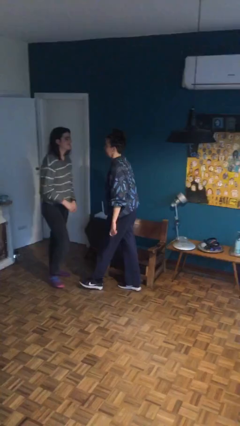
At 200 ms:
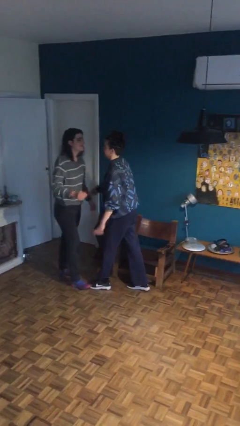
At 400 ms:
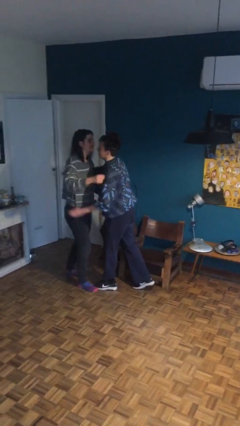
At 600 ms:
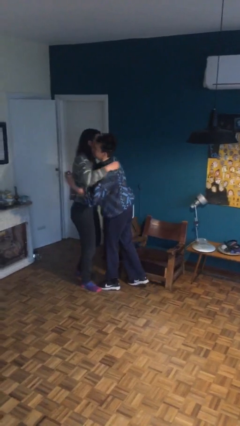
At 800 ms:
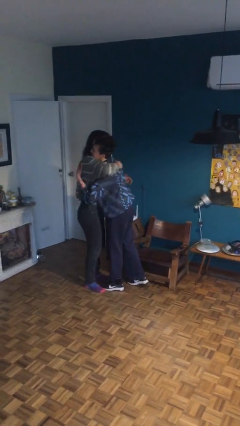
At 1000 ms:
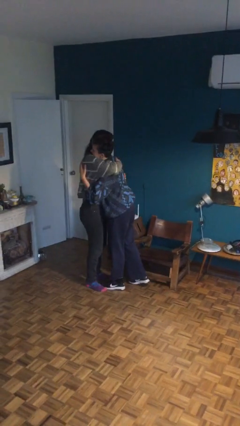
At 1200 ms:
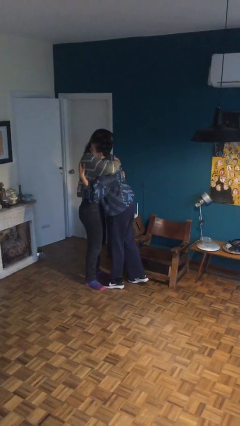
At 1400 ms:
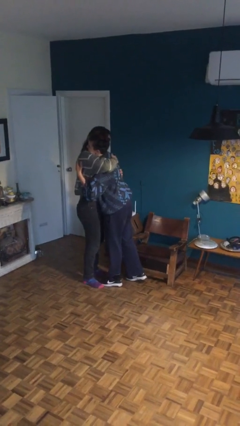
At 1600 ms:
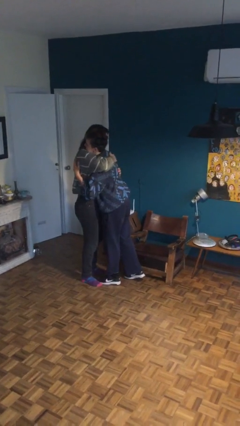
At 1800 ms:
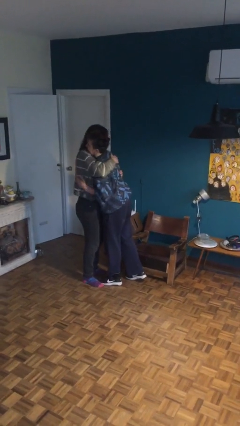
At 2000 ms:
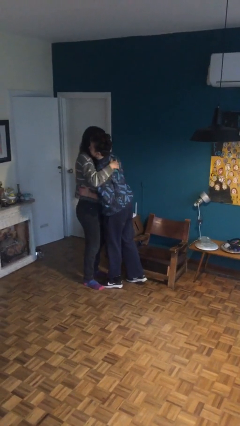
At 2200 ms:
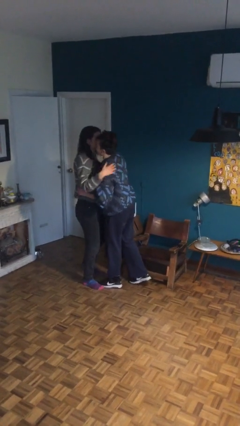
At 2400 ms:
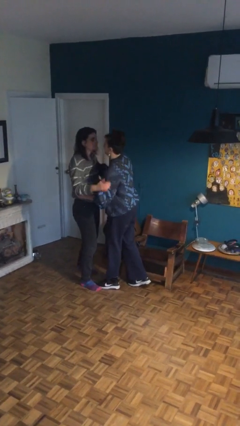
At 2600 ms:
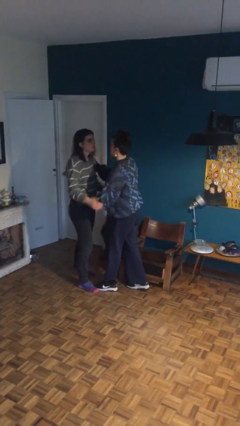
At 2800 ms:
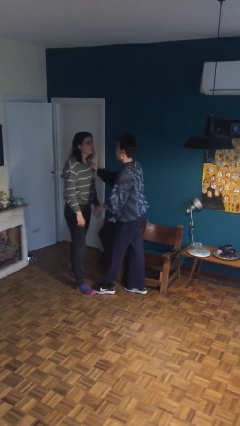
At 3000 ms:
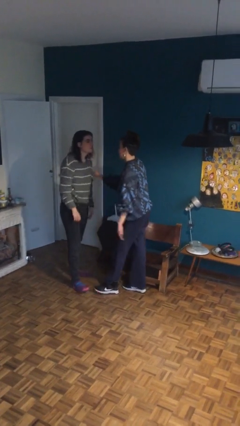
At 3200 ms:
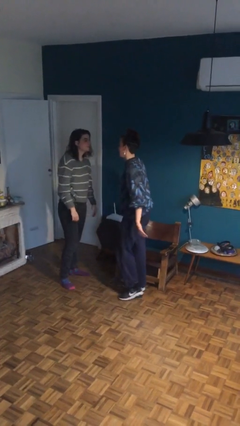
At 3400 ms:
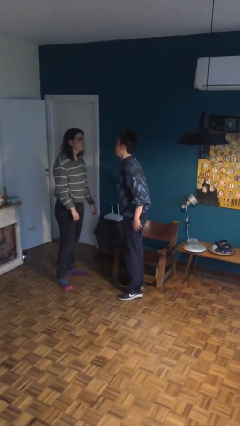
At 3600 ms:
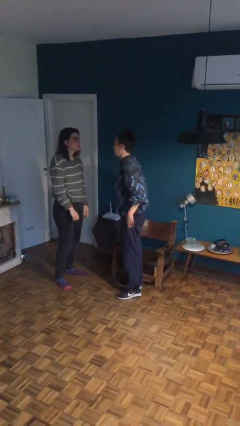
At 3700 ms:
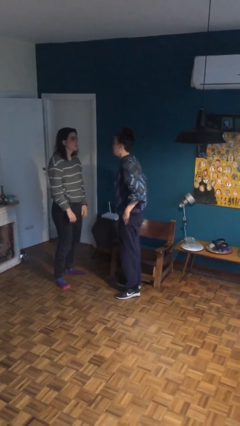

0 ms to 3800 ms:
person embraces person

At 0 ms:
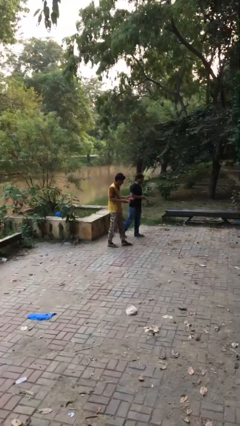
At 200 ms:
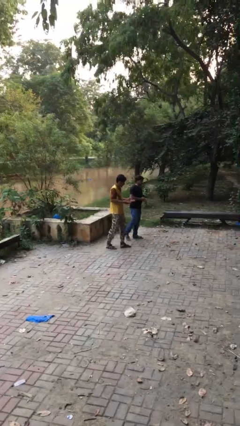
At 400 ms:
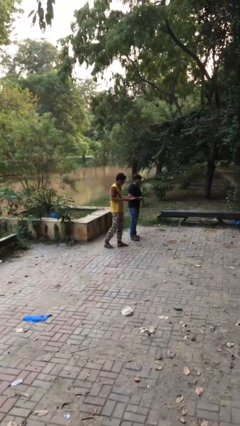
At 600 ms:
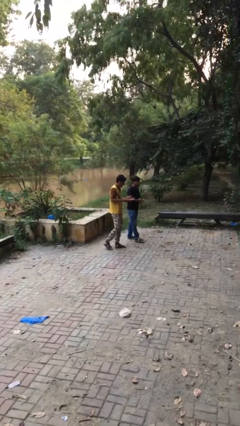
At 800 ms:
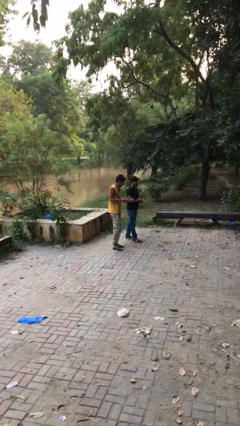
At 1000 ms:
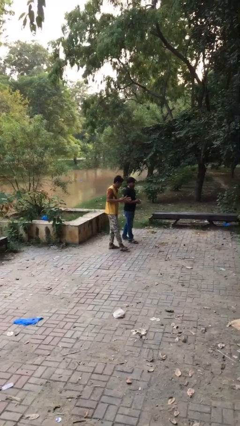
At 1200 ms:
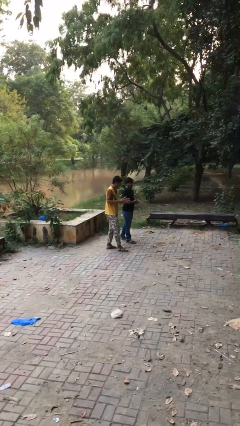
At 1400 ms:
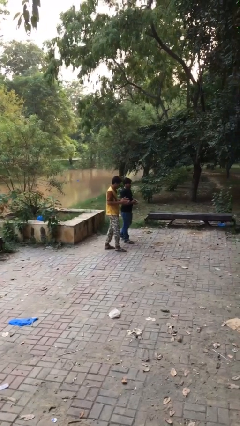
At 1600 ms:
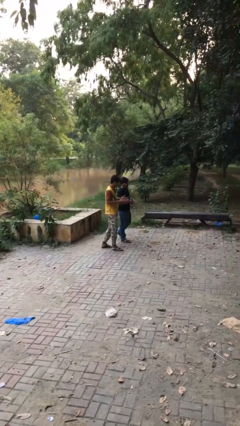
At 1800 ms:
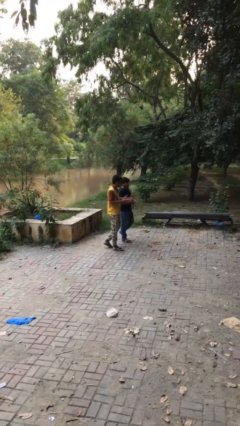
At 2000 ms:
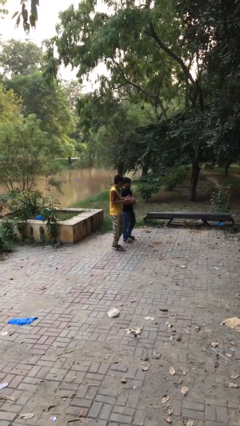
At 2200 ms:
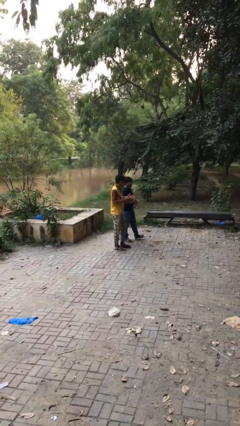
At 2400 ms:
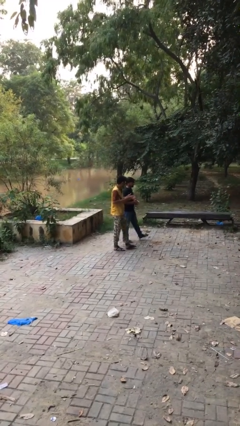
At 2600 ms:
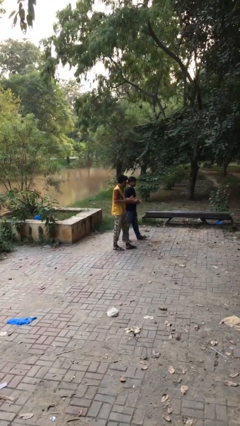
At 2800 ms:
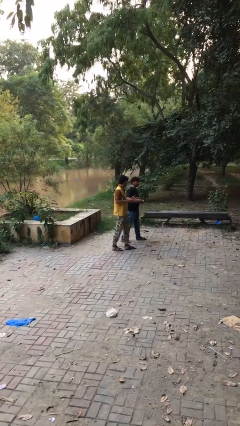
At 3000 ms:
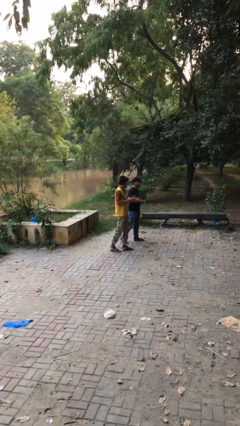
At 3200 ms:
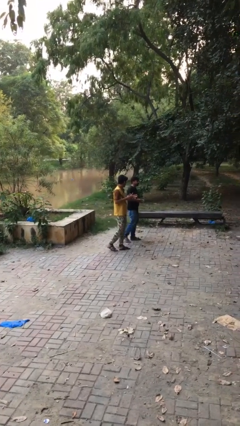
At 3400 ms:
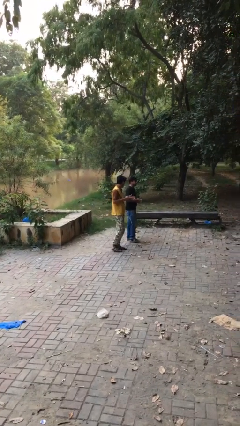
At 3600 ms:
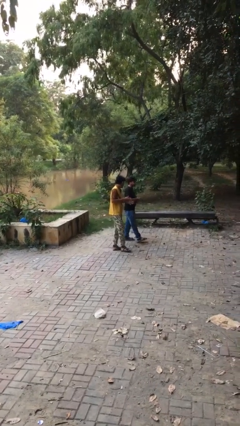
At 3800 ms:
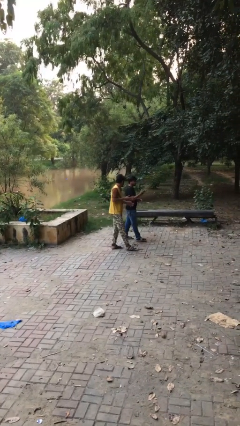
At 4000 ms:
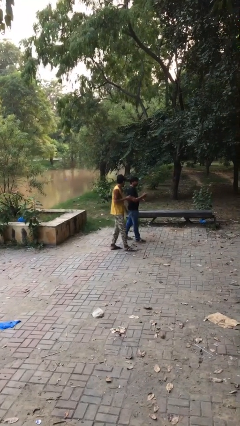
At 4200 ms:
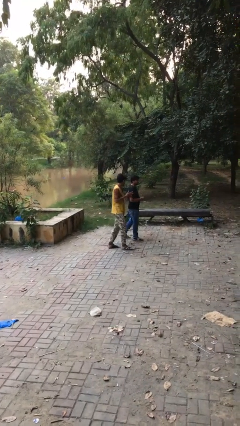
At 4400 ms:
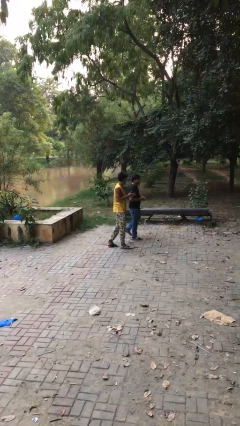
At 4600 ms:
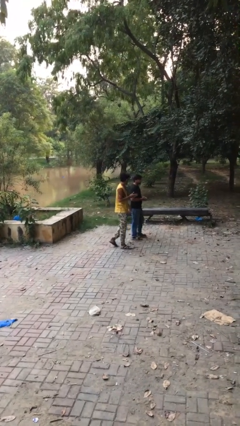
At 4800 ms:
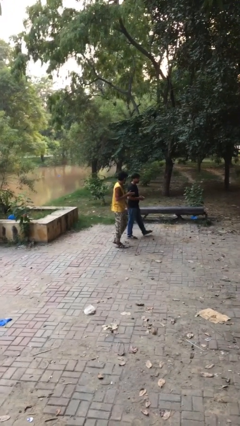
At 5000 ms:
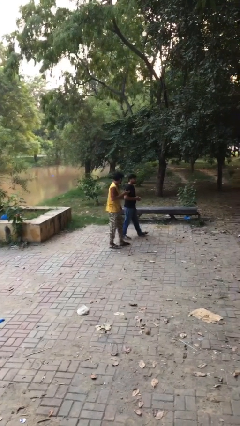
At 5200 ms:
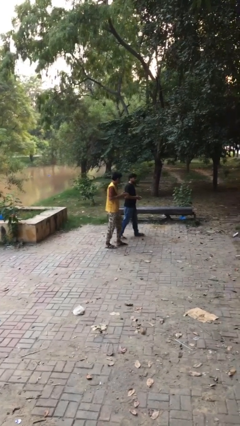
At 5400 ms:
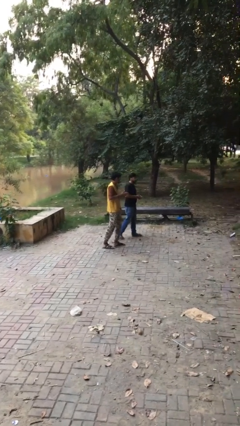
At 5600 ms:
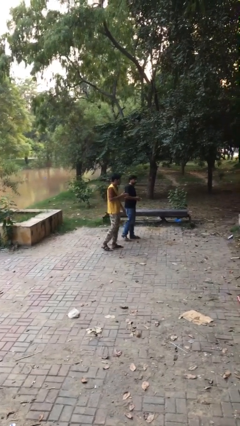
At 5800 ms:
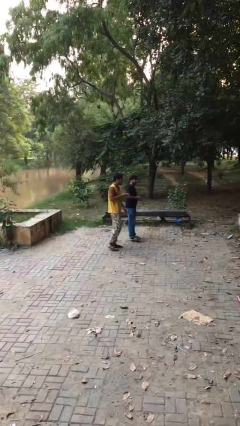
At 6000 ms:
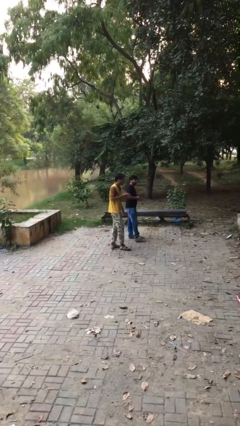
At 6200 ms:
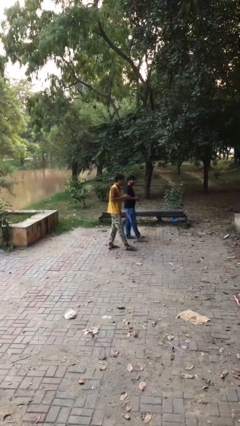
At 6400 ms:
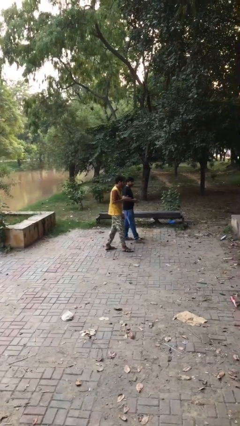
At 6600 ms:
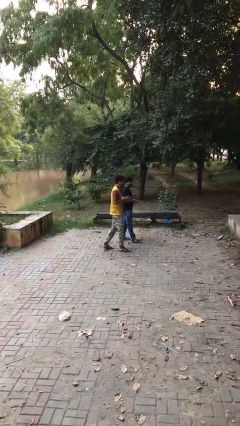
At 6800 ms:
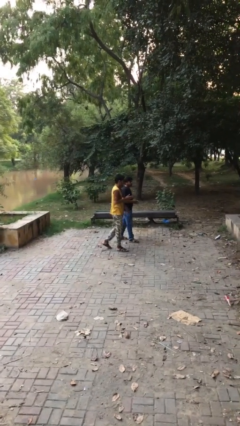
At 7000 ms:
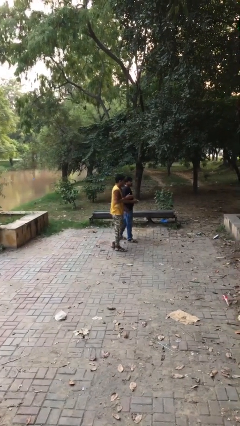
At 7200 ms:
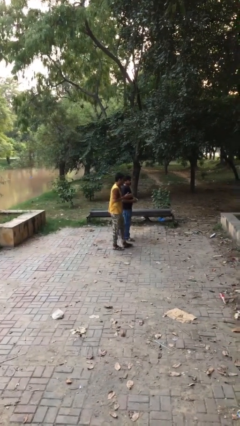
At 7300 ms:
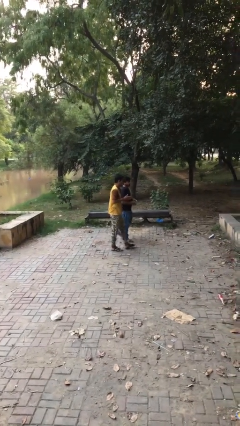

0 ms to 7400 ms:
person talks to person

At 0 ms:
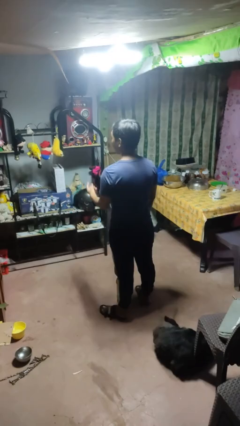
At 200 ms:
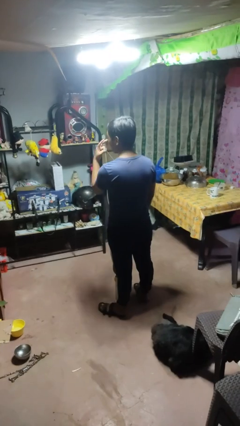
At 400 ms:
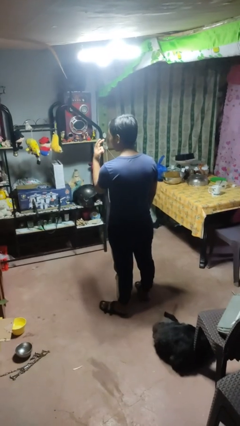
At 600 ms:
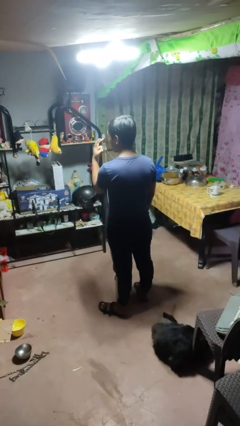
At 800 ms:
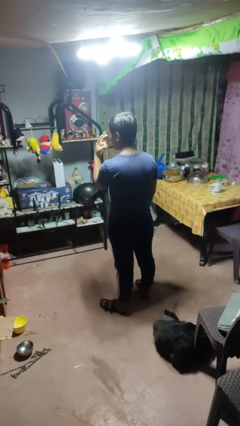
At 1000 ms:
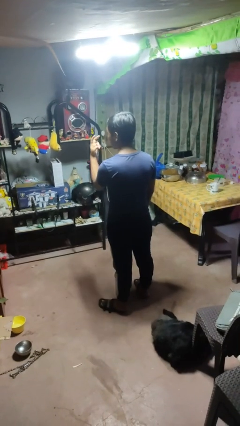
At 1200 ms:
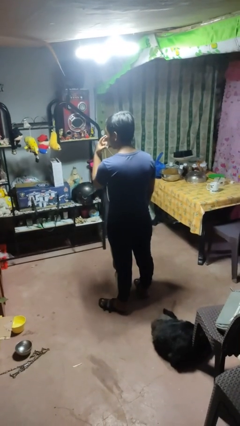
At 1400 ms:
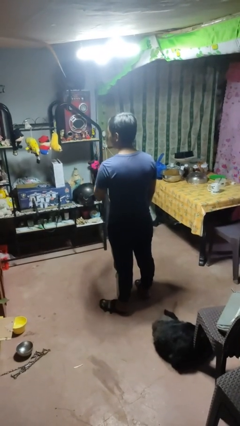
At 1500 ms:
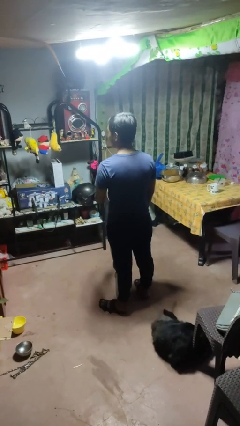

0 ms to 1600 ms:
person gestures watch closely

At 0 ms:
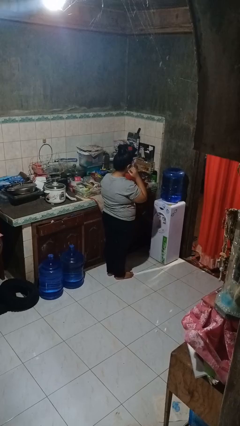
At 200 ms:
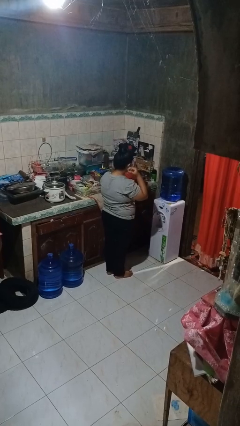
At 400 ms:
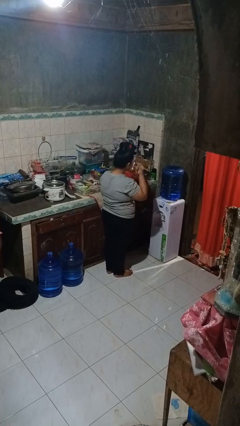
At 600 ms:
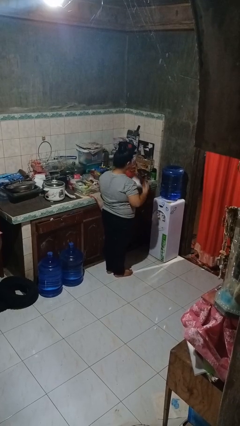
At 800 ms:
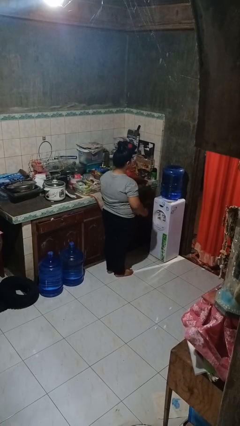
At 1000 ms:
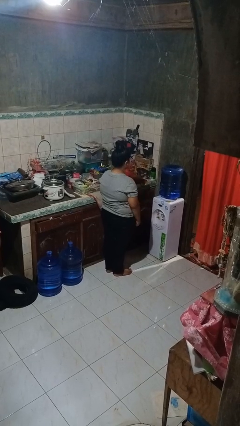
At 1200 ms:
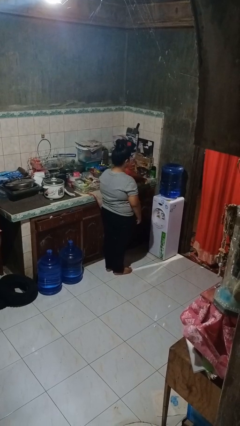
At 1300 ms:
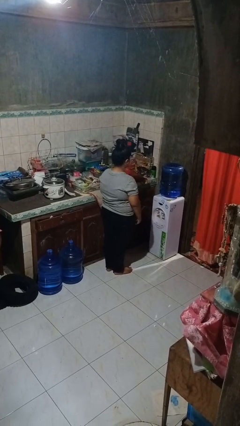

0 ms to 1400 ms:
person takes off facemask

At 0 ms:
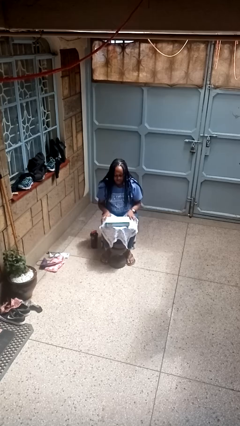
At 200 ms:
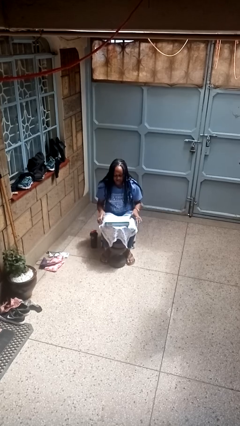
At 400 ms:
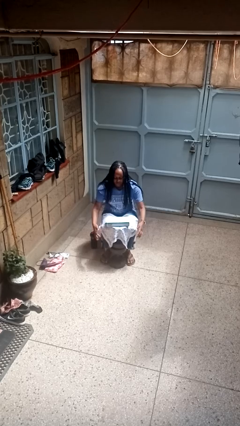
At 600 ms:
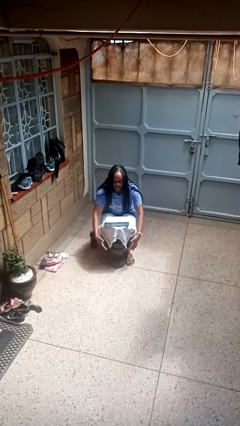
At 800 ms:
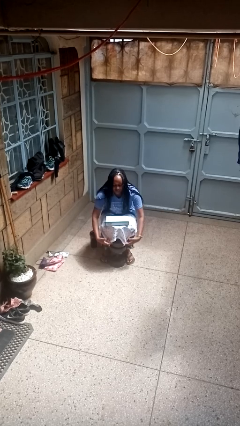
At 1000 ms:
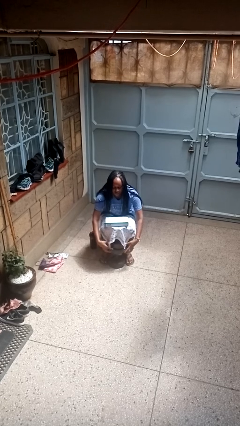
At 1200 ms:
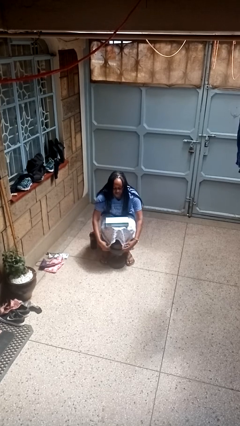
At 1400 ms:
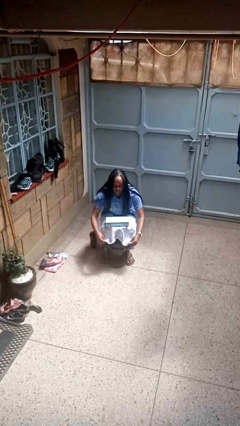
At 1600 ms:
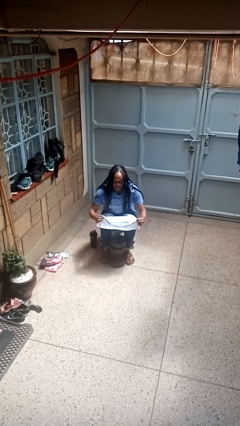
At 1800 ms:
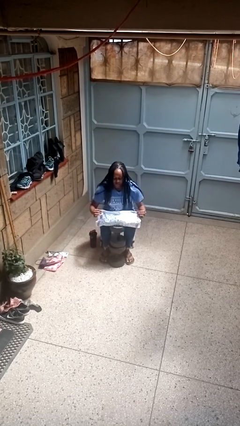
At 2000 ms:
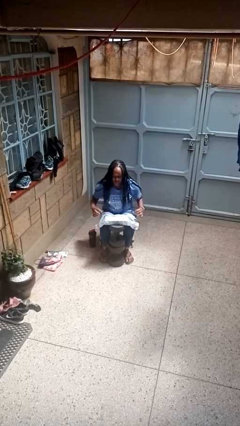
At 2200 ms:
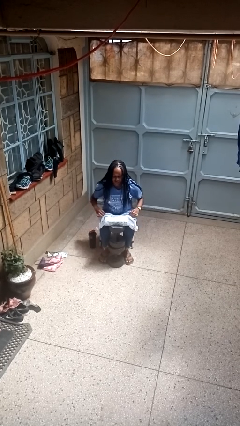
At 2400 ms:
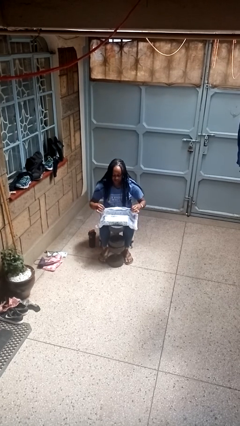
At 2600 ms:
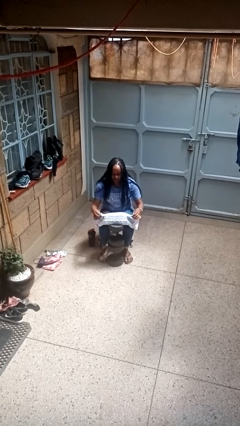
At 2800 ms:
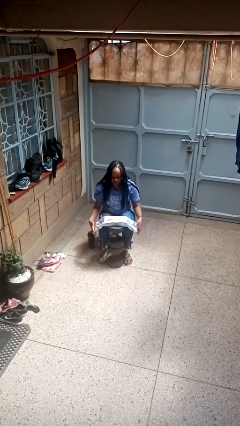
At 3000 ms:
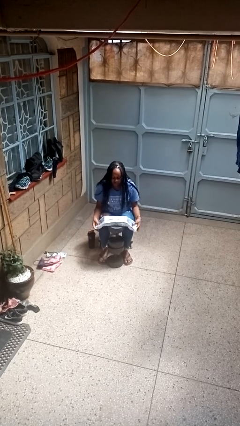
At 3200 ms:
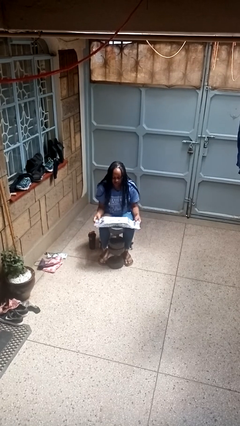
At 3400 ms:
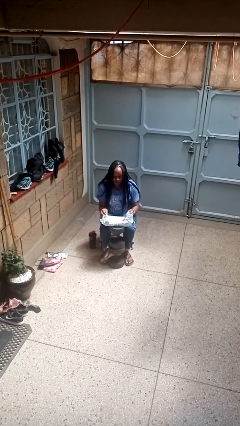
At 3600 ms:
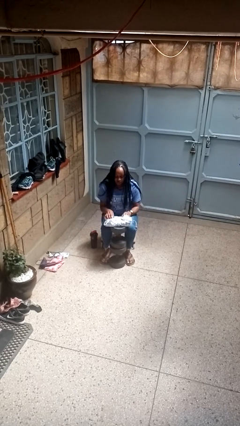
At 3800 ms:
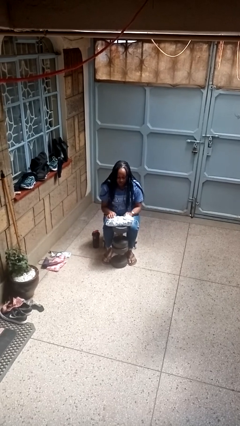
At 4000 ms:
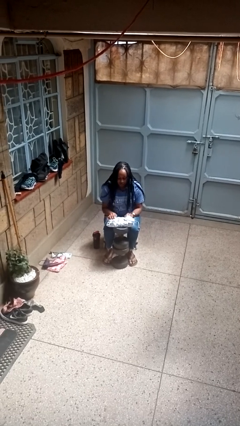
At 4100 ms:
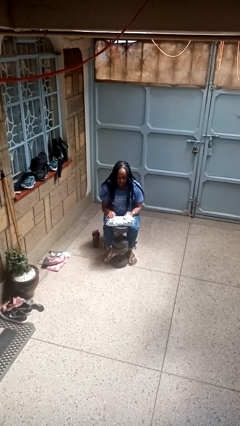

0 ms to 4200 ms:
person wraps box
